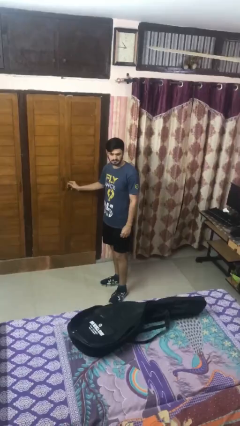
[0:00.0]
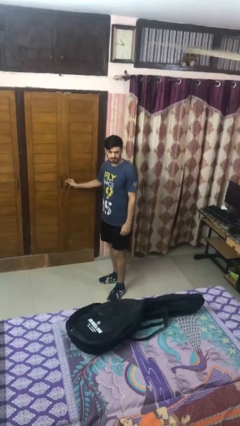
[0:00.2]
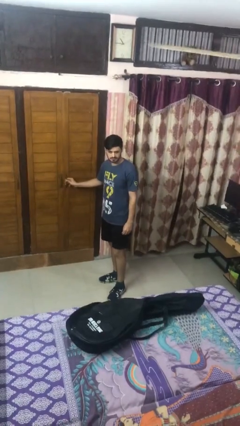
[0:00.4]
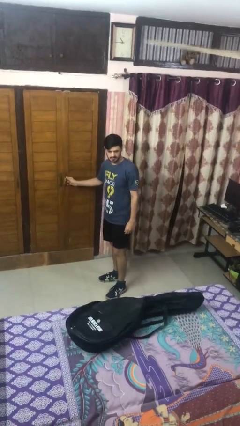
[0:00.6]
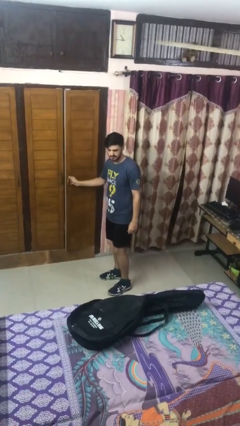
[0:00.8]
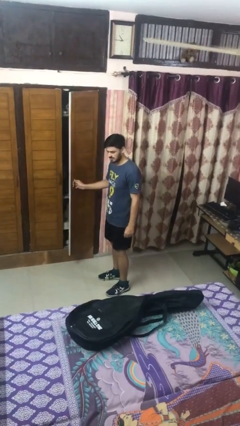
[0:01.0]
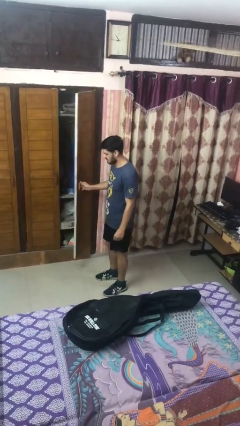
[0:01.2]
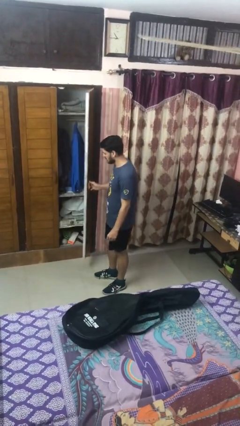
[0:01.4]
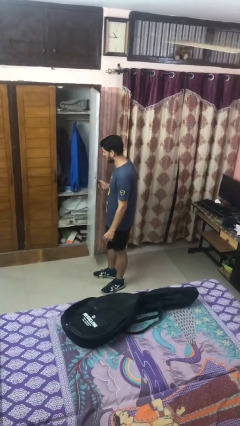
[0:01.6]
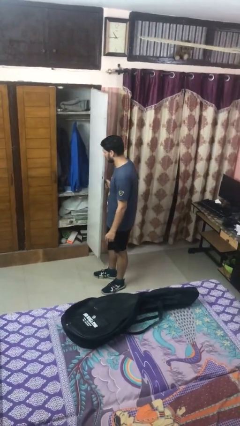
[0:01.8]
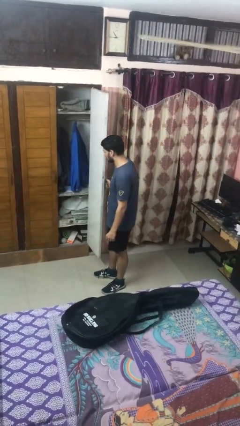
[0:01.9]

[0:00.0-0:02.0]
person opens closet door

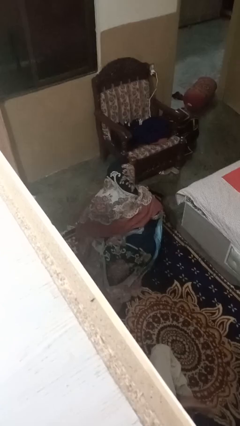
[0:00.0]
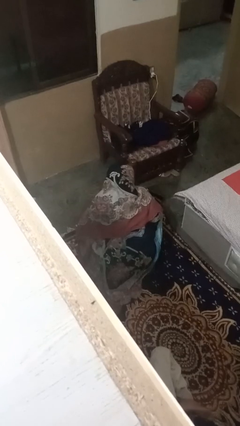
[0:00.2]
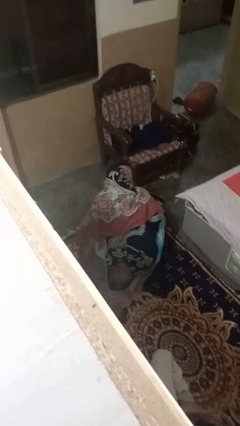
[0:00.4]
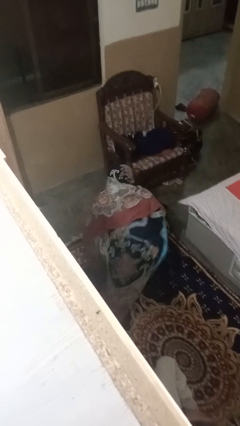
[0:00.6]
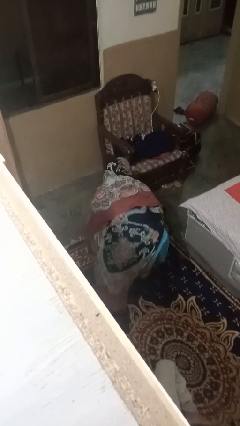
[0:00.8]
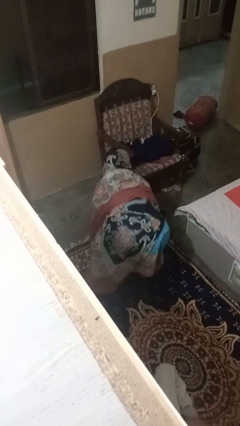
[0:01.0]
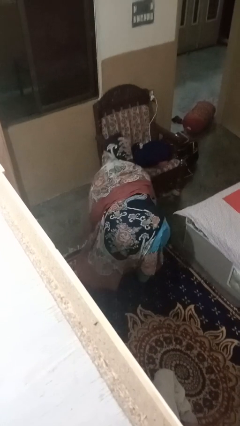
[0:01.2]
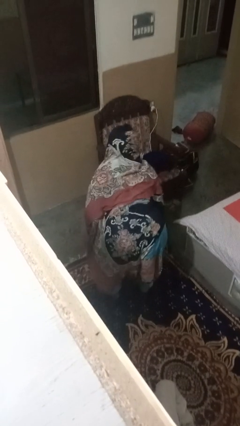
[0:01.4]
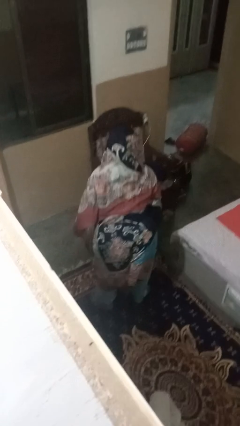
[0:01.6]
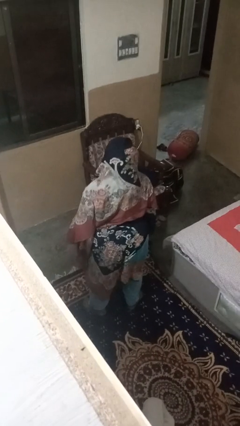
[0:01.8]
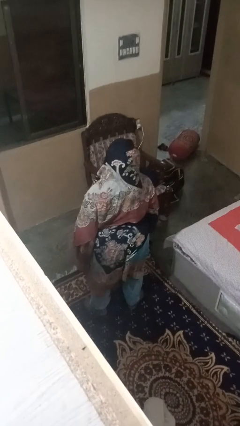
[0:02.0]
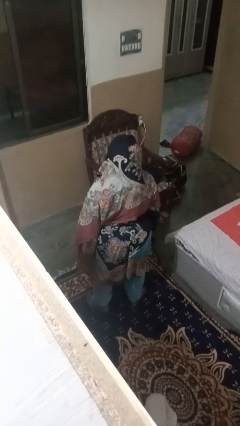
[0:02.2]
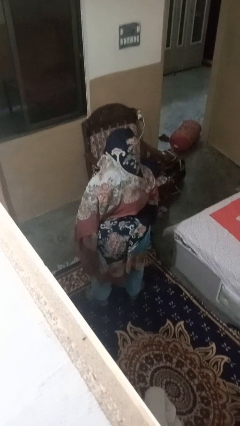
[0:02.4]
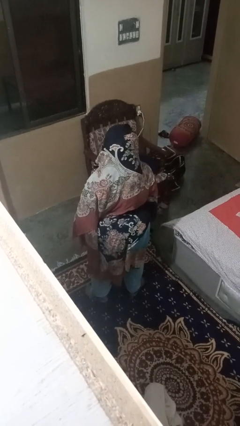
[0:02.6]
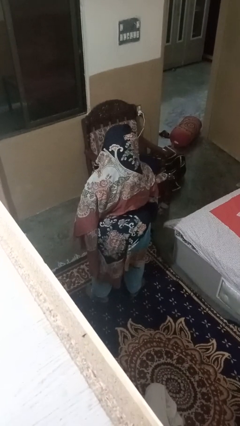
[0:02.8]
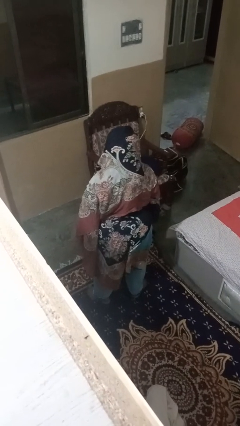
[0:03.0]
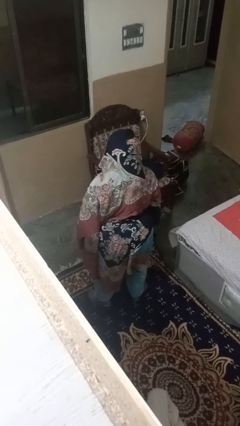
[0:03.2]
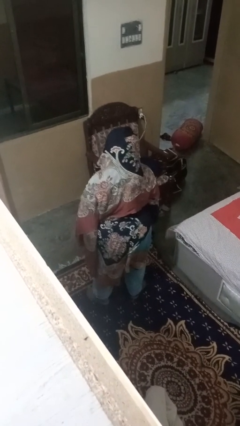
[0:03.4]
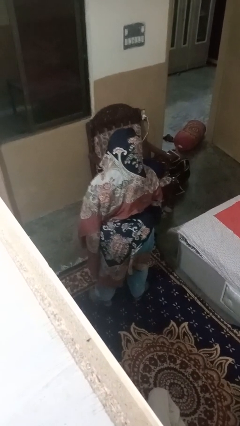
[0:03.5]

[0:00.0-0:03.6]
person stands up

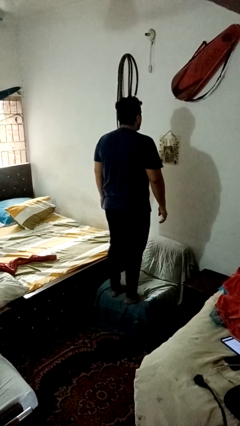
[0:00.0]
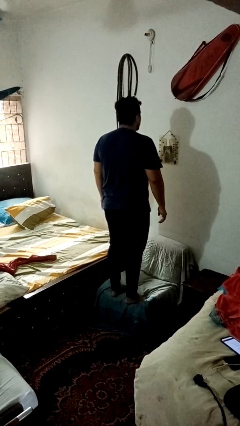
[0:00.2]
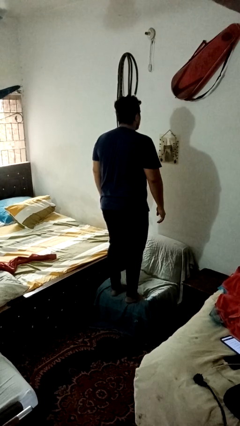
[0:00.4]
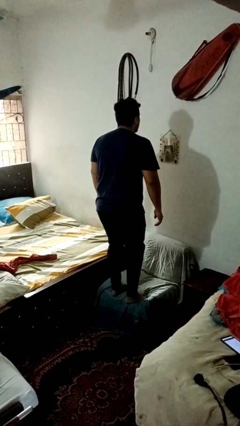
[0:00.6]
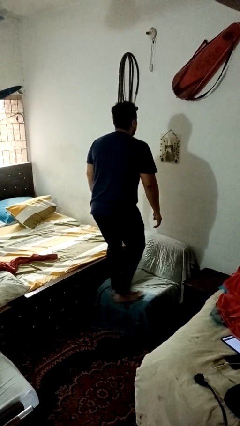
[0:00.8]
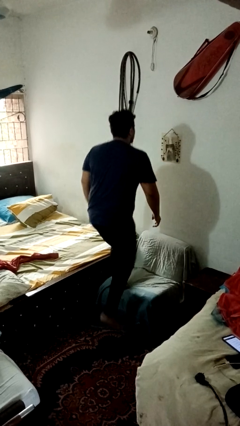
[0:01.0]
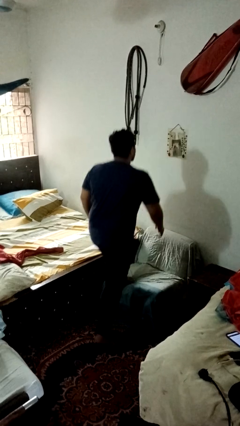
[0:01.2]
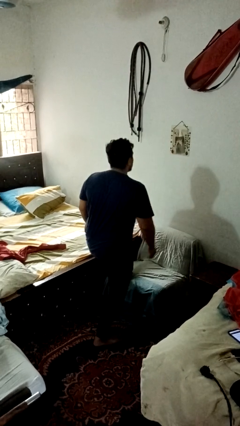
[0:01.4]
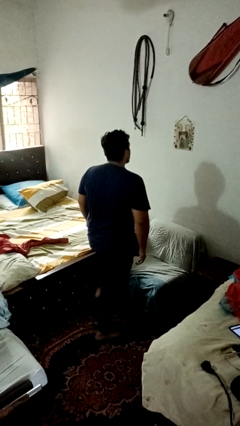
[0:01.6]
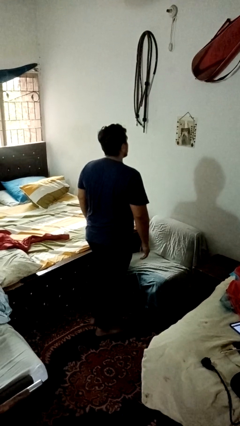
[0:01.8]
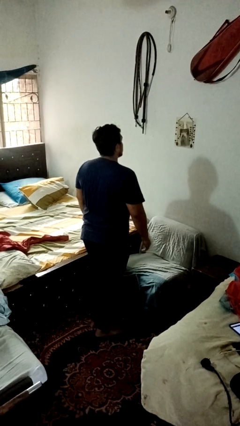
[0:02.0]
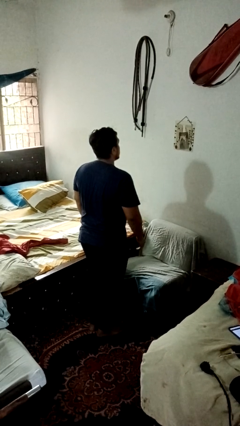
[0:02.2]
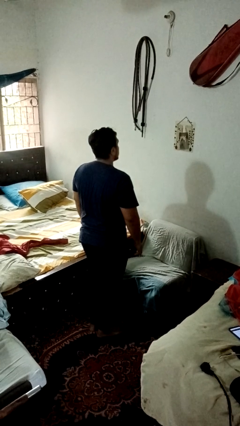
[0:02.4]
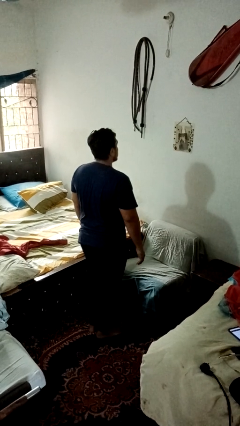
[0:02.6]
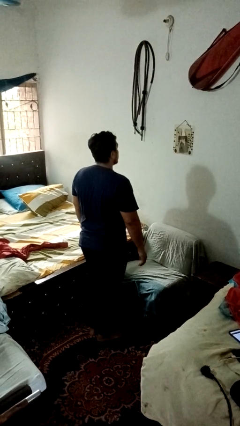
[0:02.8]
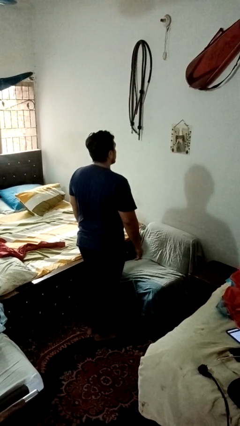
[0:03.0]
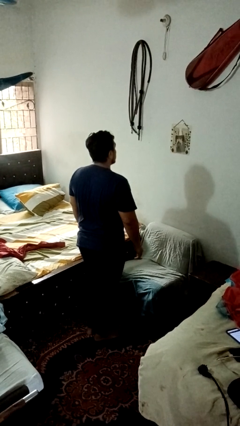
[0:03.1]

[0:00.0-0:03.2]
person climbs off couch

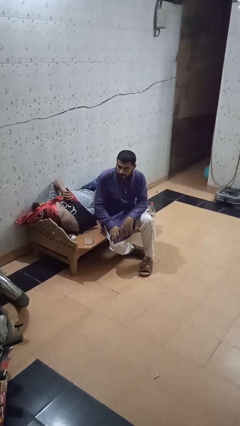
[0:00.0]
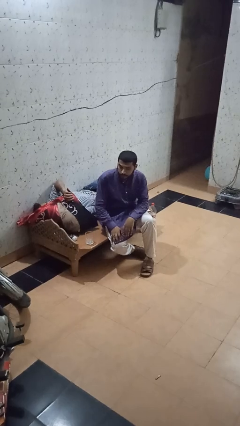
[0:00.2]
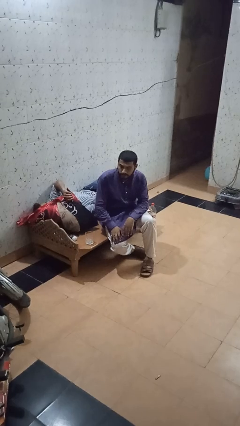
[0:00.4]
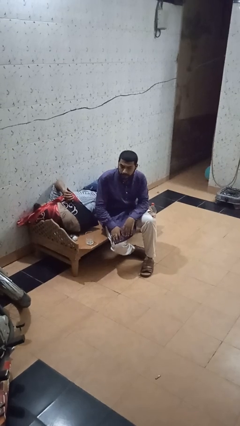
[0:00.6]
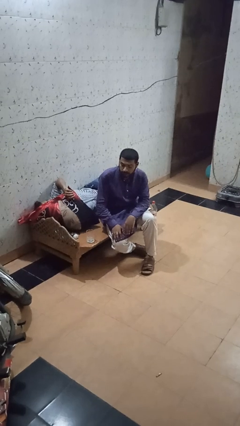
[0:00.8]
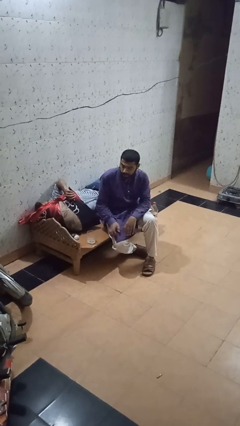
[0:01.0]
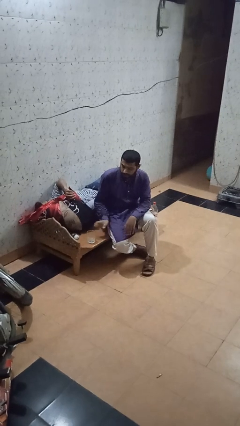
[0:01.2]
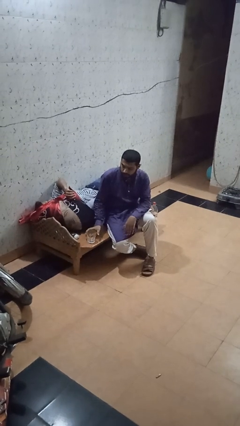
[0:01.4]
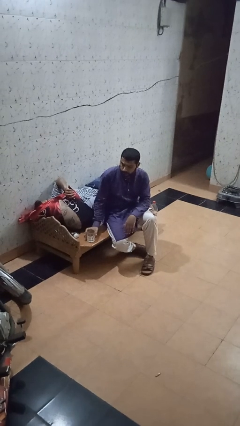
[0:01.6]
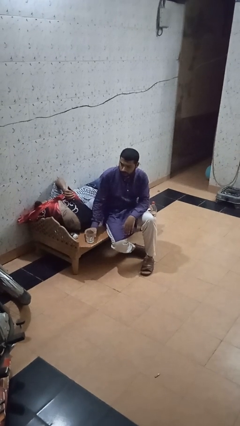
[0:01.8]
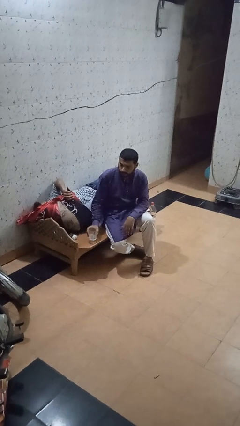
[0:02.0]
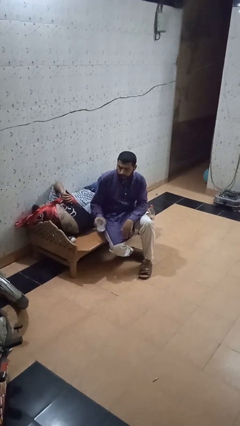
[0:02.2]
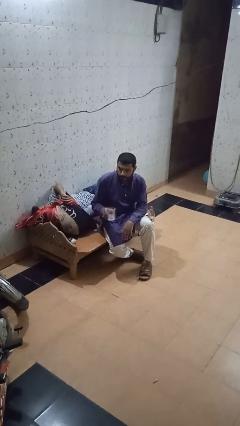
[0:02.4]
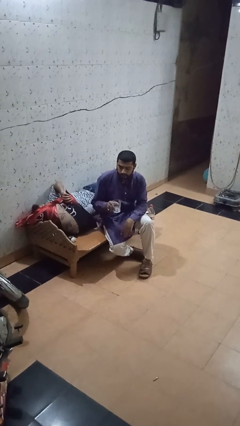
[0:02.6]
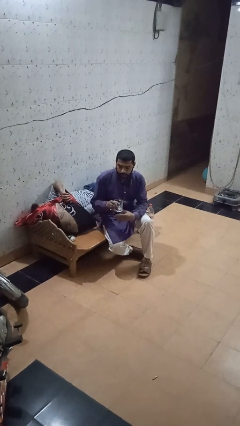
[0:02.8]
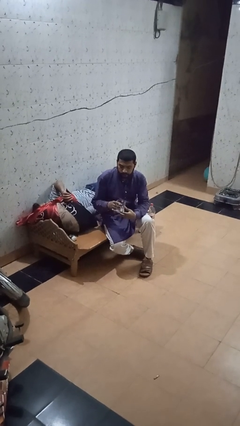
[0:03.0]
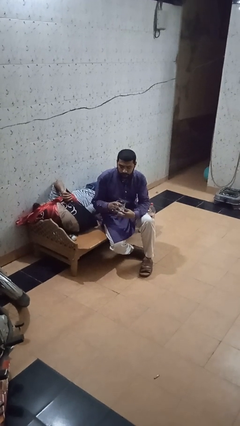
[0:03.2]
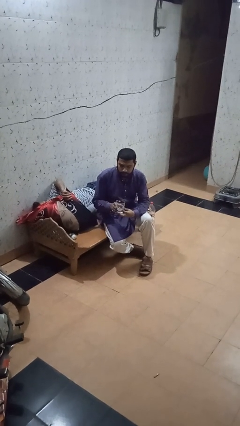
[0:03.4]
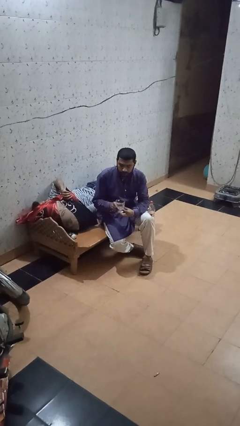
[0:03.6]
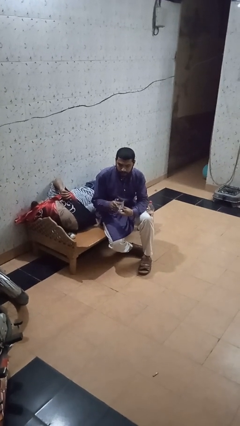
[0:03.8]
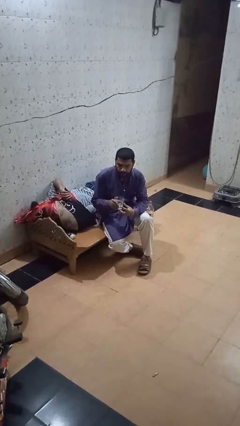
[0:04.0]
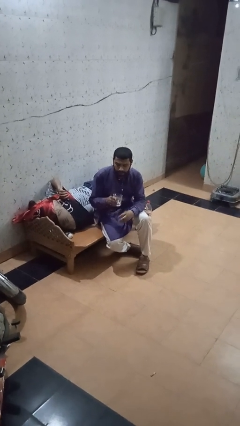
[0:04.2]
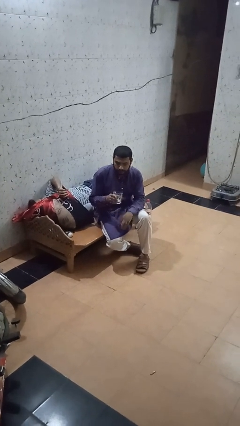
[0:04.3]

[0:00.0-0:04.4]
person picks up object from table

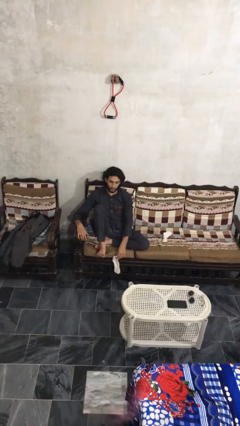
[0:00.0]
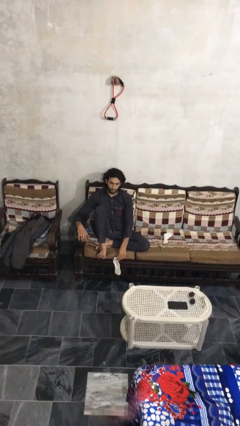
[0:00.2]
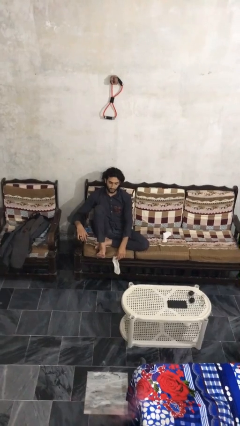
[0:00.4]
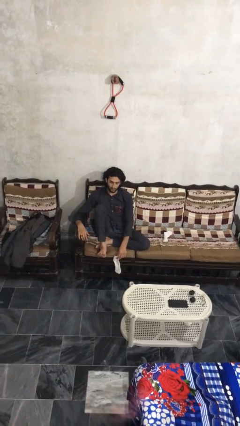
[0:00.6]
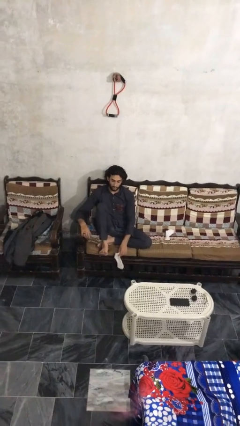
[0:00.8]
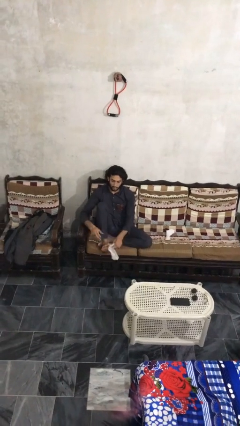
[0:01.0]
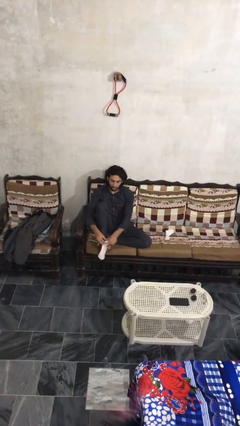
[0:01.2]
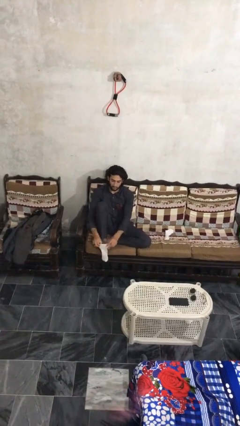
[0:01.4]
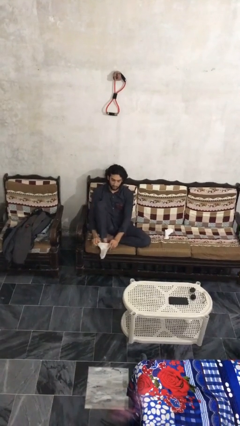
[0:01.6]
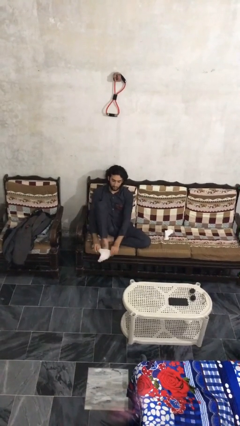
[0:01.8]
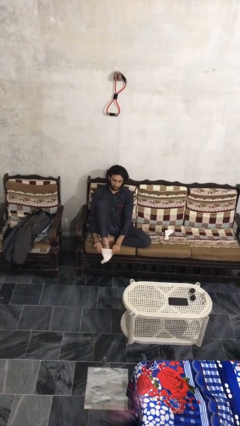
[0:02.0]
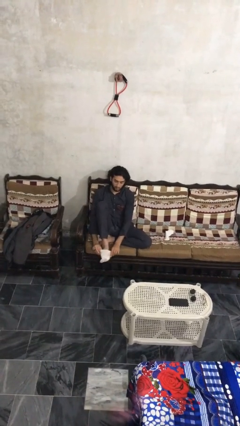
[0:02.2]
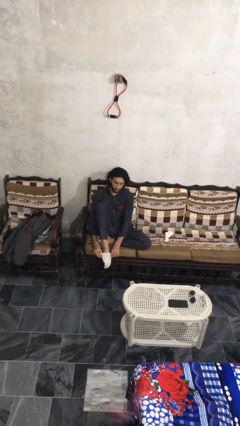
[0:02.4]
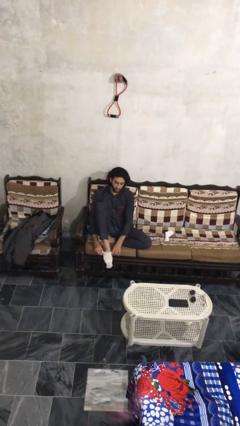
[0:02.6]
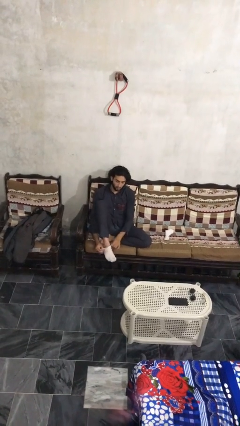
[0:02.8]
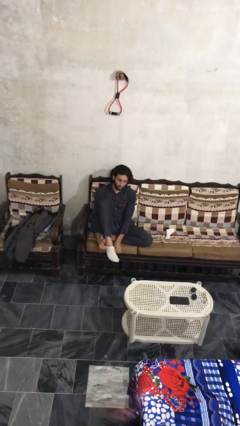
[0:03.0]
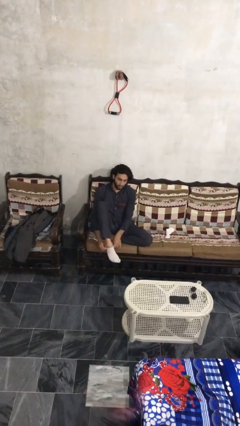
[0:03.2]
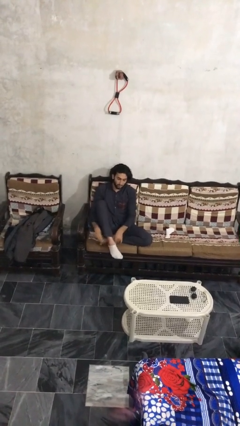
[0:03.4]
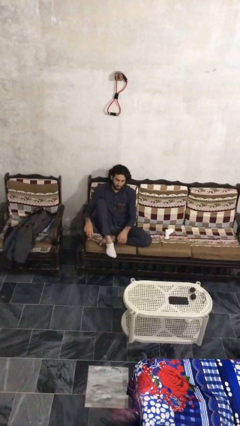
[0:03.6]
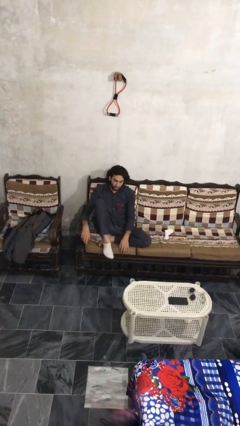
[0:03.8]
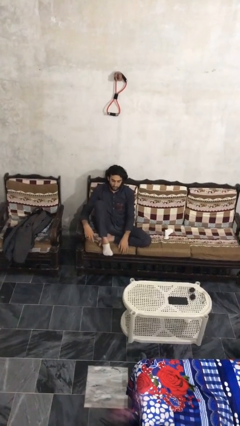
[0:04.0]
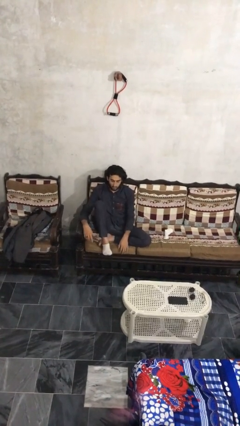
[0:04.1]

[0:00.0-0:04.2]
person puts on socks

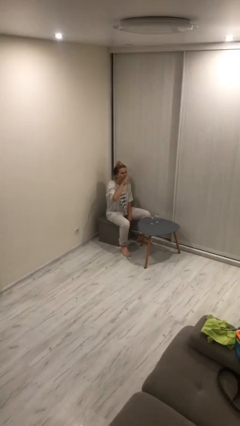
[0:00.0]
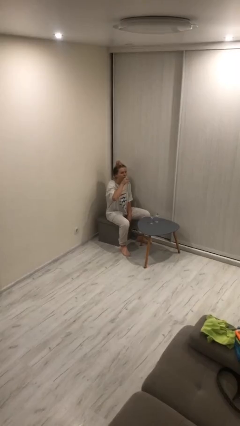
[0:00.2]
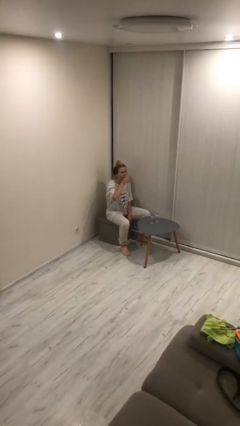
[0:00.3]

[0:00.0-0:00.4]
person drinks from shotglass
